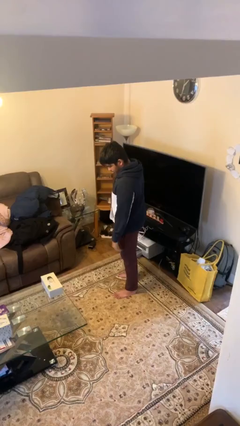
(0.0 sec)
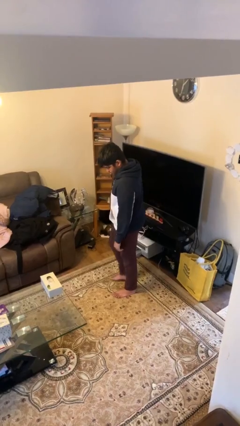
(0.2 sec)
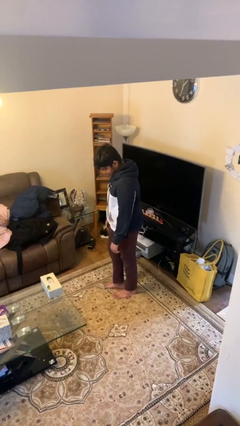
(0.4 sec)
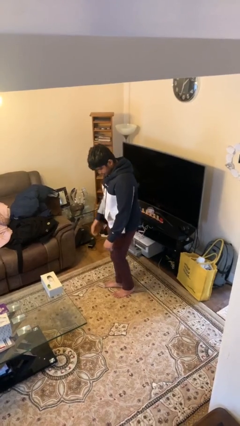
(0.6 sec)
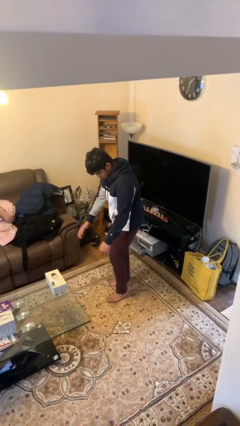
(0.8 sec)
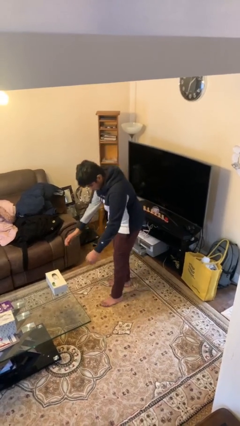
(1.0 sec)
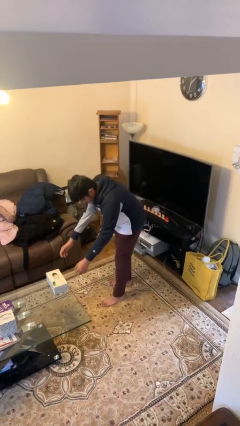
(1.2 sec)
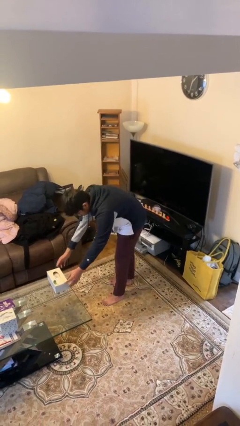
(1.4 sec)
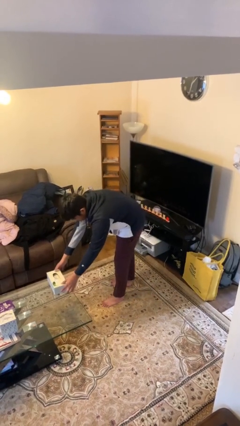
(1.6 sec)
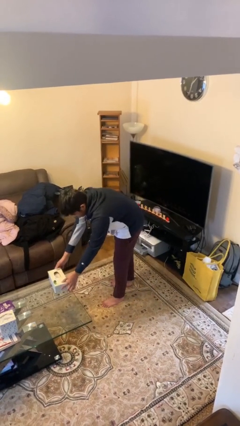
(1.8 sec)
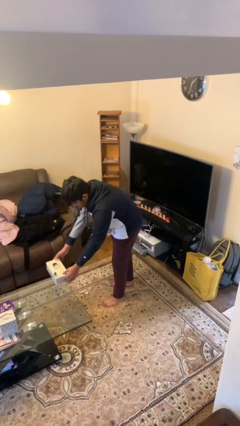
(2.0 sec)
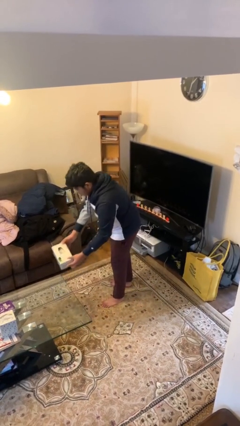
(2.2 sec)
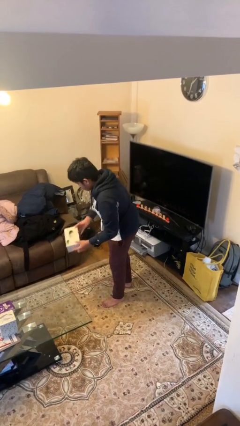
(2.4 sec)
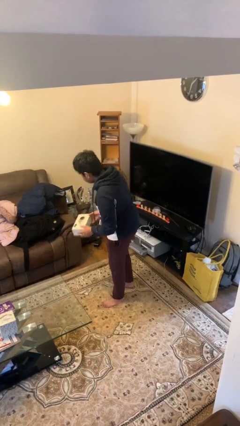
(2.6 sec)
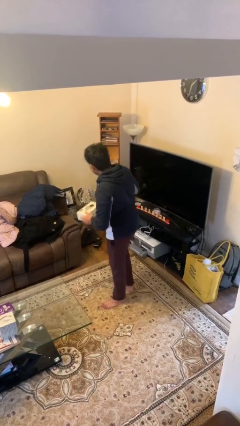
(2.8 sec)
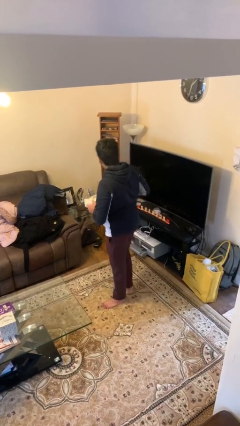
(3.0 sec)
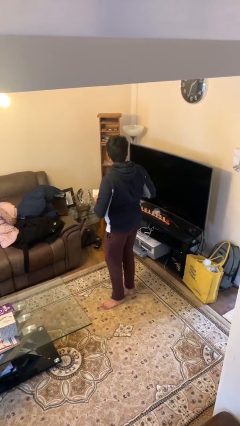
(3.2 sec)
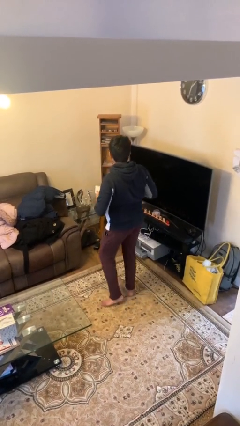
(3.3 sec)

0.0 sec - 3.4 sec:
person picks up object from table

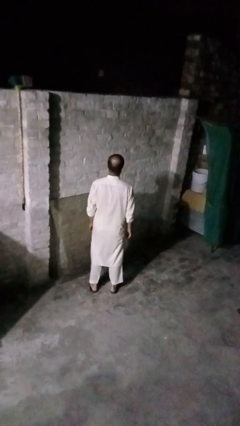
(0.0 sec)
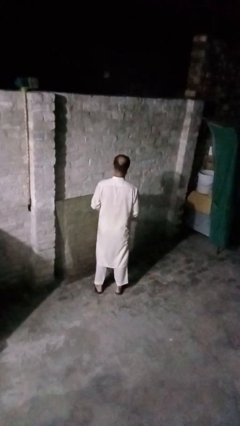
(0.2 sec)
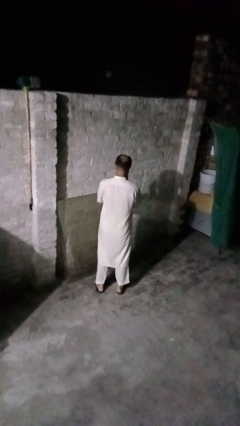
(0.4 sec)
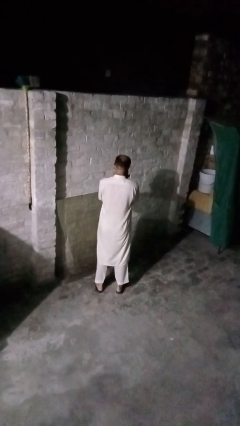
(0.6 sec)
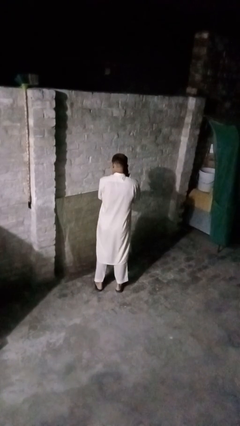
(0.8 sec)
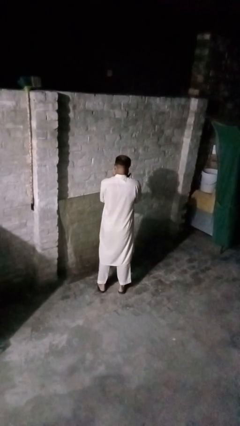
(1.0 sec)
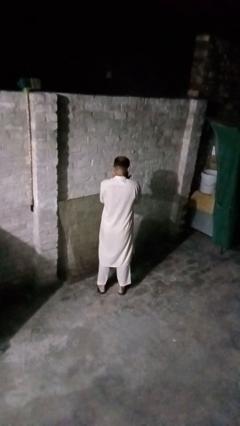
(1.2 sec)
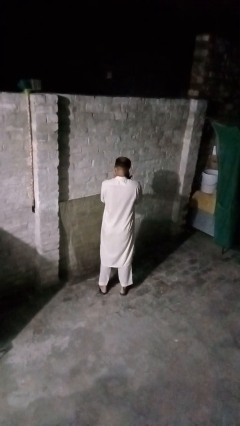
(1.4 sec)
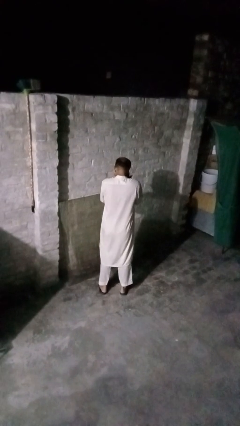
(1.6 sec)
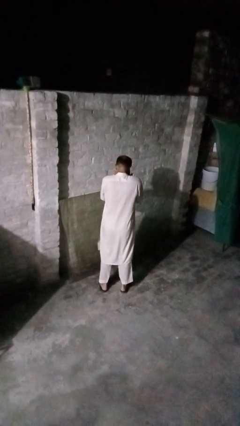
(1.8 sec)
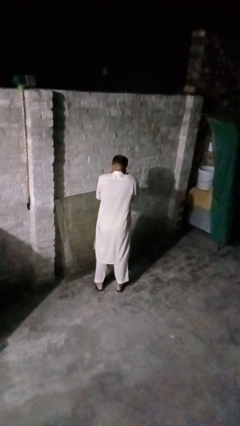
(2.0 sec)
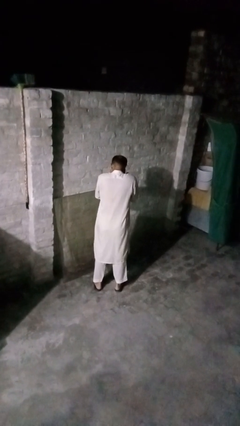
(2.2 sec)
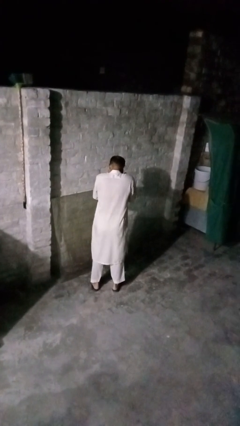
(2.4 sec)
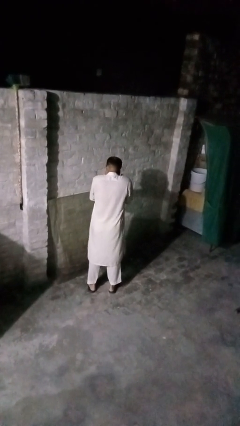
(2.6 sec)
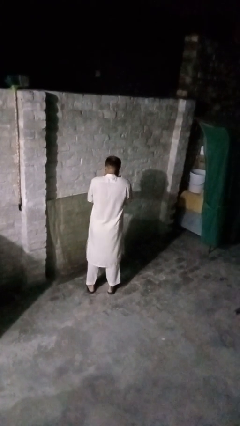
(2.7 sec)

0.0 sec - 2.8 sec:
person sneezes into hand

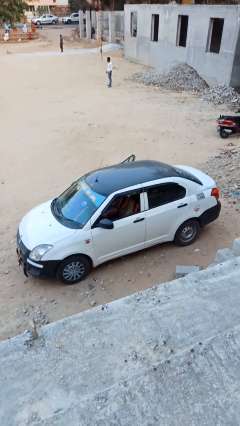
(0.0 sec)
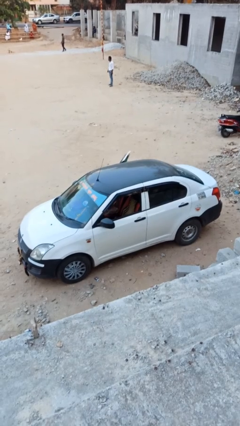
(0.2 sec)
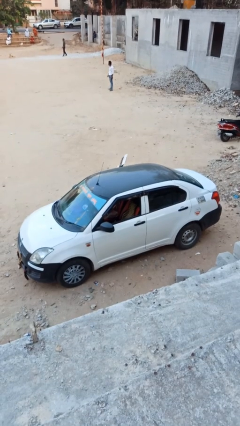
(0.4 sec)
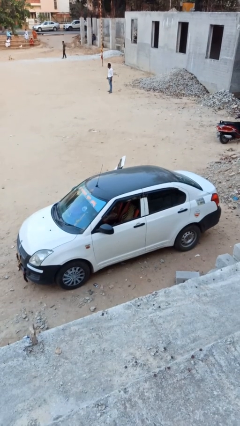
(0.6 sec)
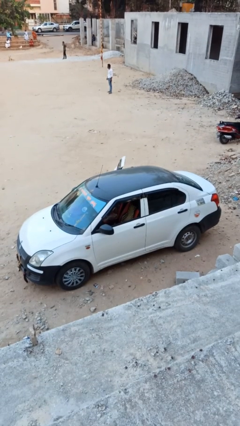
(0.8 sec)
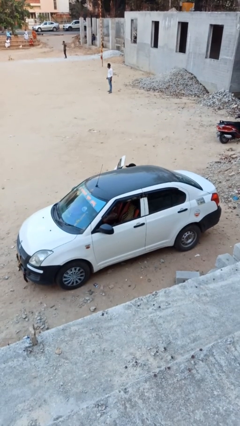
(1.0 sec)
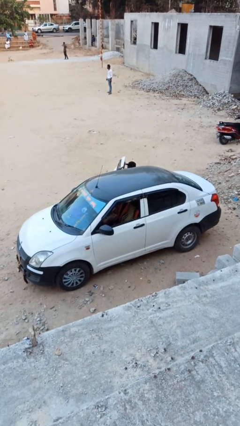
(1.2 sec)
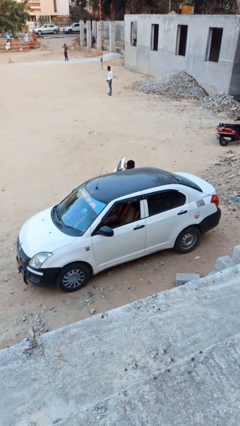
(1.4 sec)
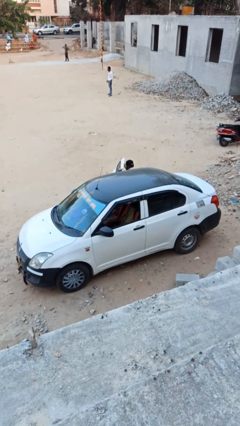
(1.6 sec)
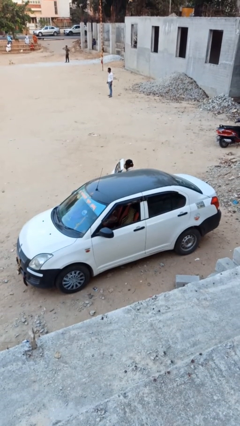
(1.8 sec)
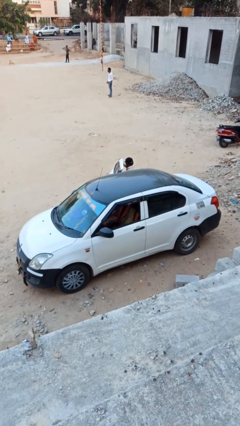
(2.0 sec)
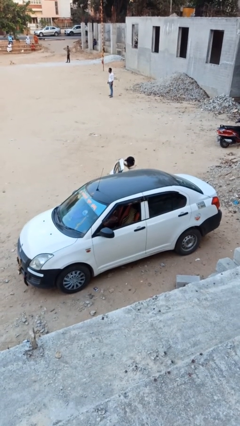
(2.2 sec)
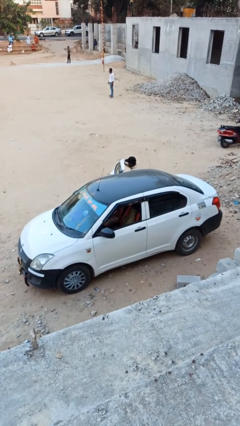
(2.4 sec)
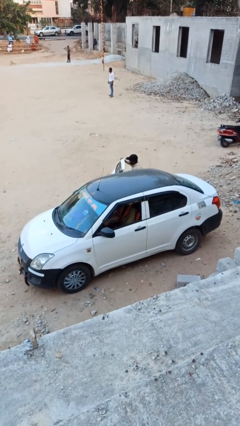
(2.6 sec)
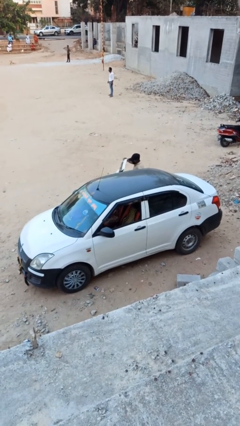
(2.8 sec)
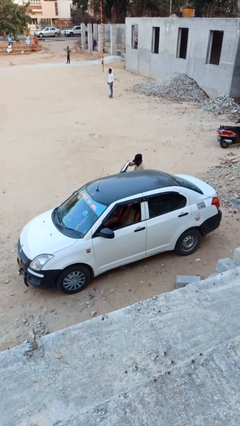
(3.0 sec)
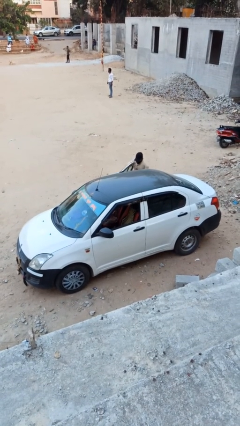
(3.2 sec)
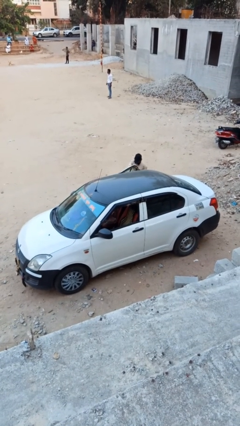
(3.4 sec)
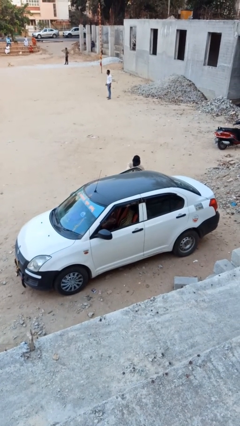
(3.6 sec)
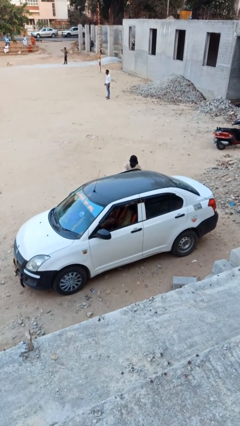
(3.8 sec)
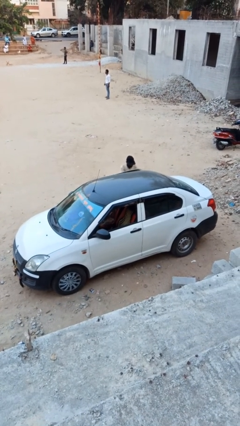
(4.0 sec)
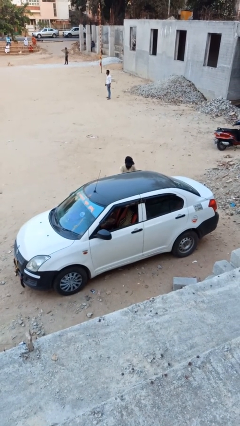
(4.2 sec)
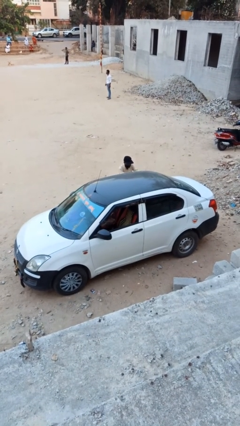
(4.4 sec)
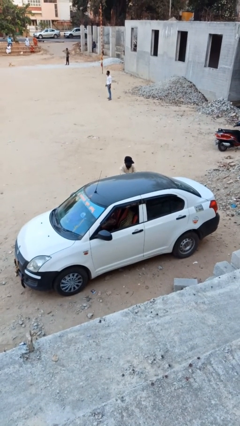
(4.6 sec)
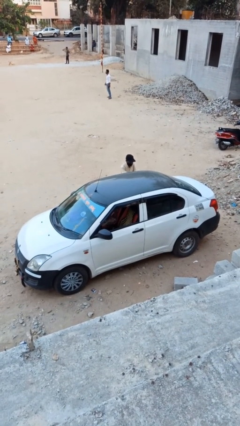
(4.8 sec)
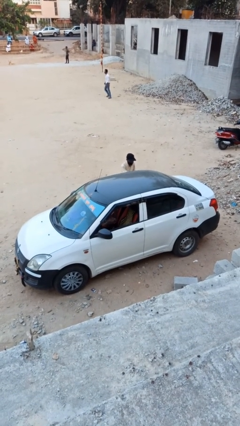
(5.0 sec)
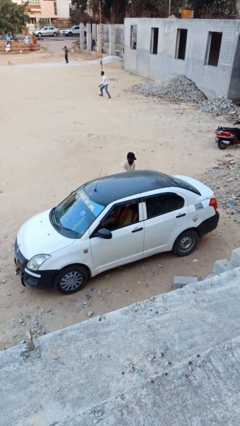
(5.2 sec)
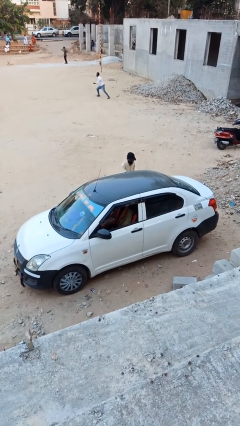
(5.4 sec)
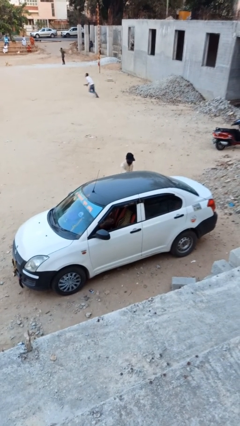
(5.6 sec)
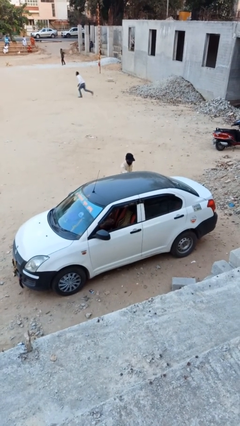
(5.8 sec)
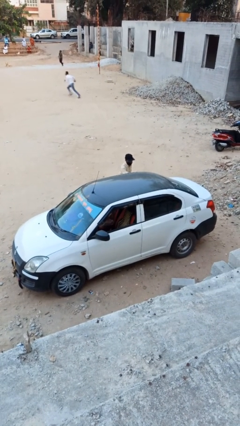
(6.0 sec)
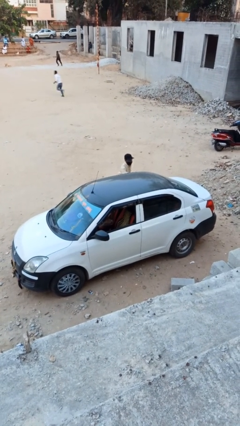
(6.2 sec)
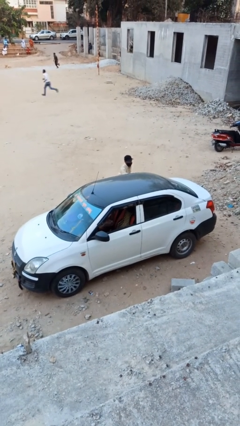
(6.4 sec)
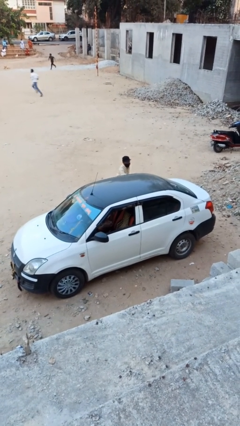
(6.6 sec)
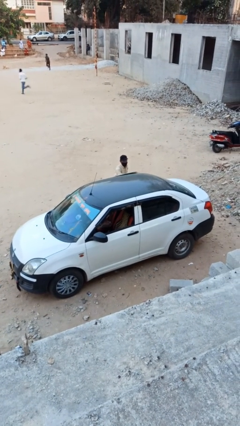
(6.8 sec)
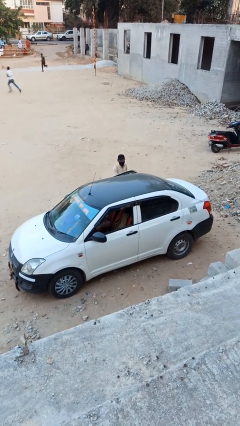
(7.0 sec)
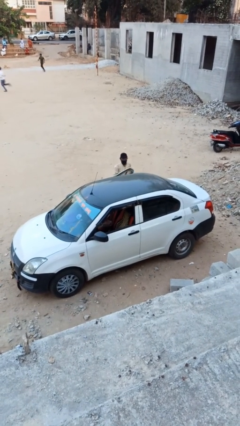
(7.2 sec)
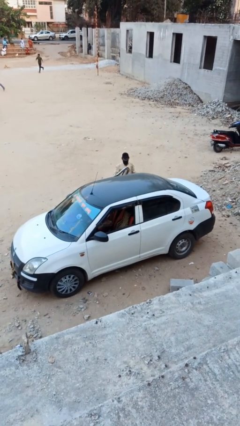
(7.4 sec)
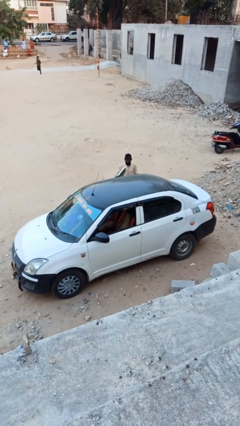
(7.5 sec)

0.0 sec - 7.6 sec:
car drops off person

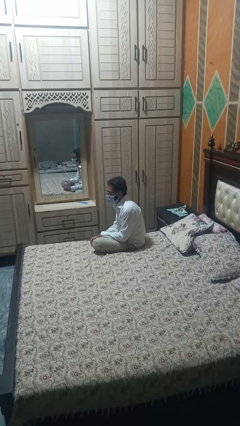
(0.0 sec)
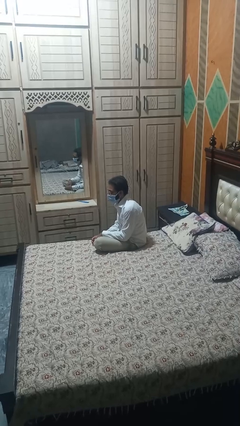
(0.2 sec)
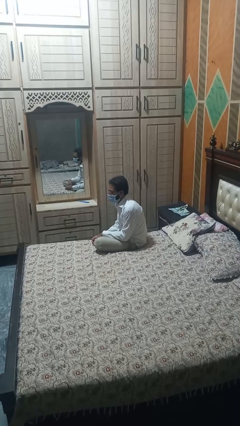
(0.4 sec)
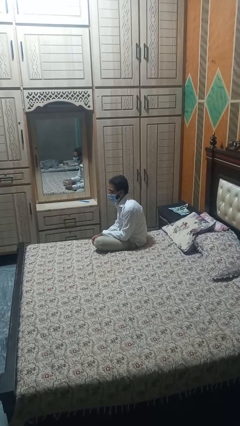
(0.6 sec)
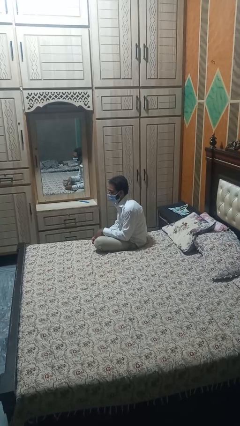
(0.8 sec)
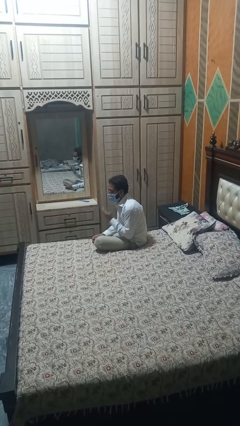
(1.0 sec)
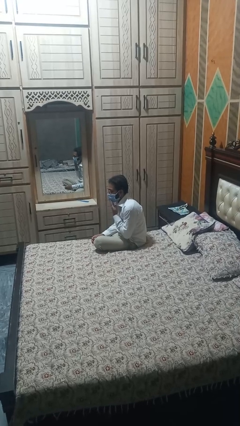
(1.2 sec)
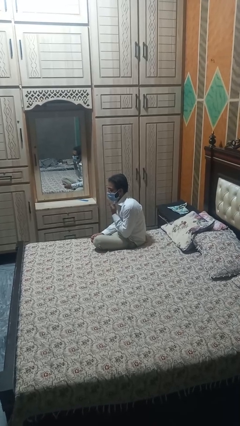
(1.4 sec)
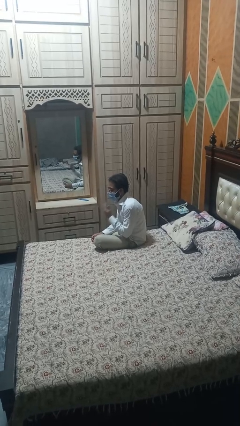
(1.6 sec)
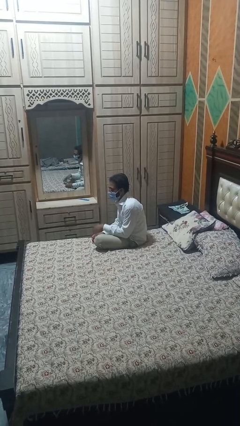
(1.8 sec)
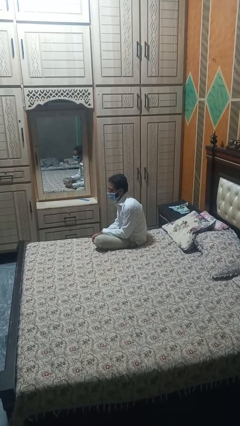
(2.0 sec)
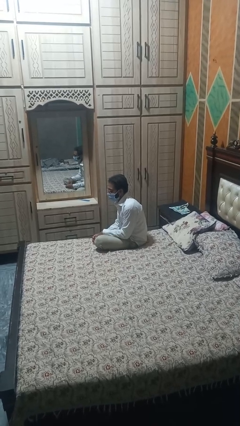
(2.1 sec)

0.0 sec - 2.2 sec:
person strokes chin

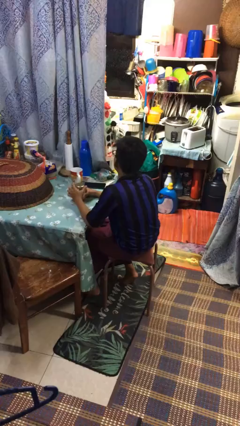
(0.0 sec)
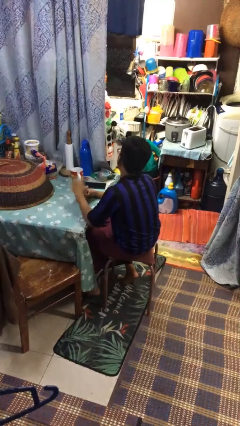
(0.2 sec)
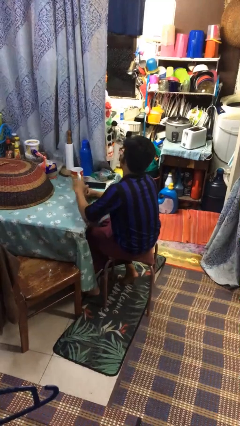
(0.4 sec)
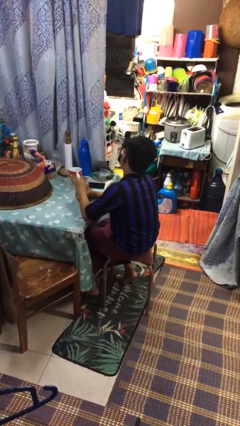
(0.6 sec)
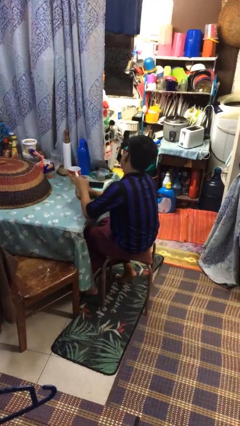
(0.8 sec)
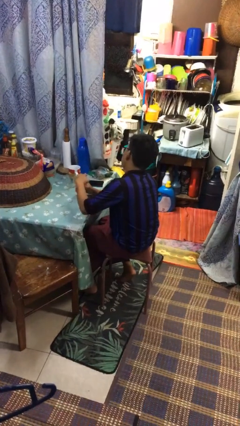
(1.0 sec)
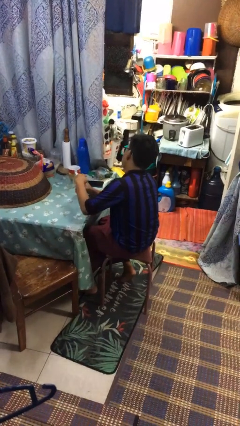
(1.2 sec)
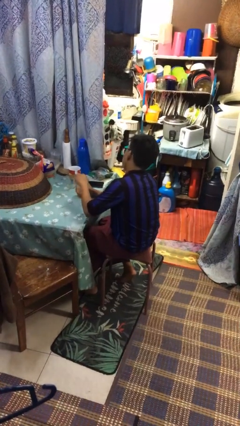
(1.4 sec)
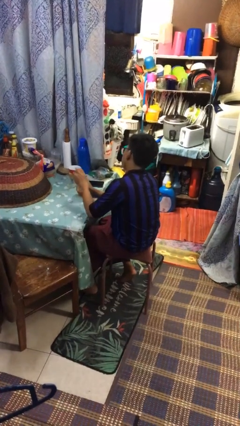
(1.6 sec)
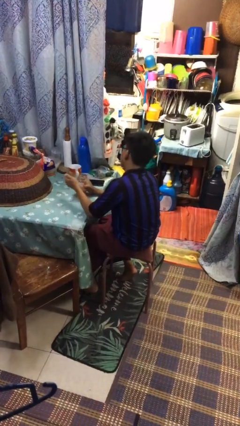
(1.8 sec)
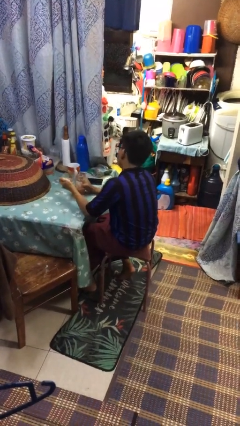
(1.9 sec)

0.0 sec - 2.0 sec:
person opens jar
